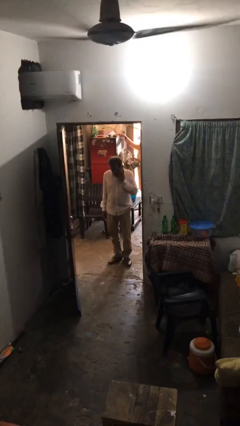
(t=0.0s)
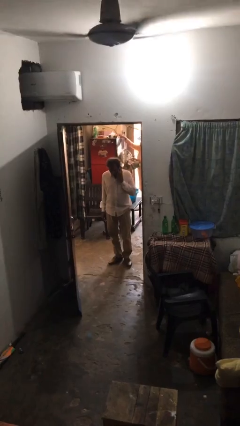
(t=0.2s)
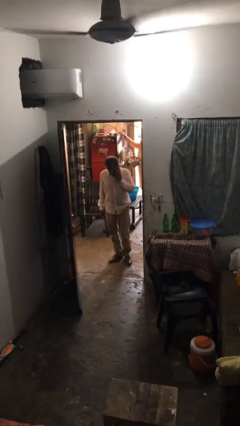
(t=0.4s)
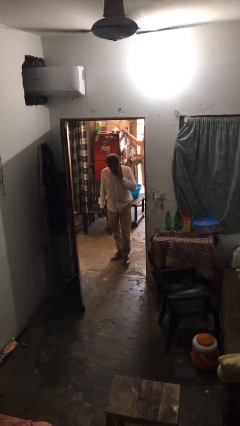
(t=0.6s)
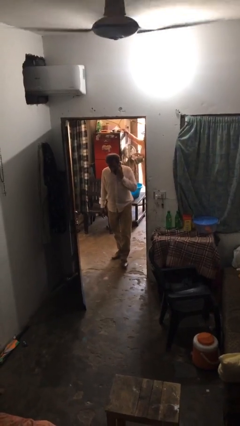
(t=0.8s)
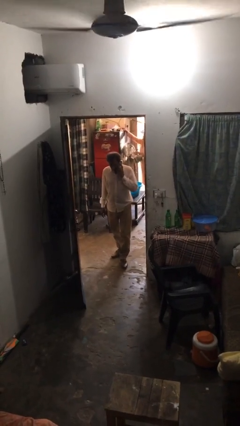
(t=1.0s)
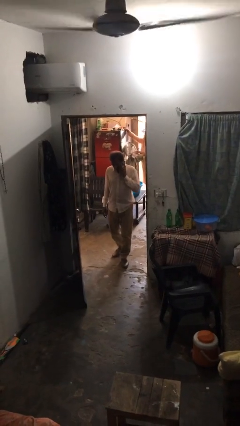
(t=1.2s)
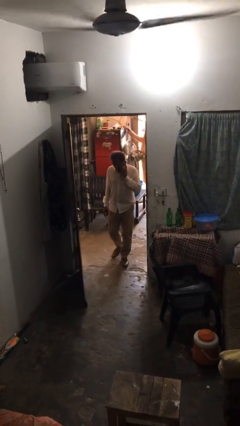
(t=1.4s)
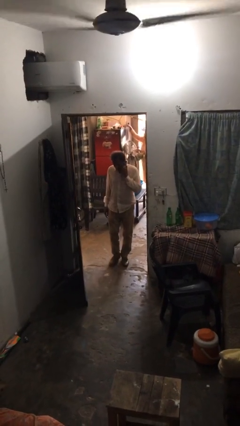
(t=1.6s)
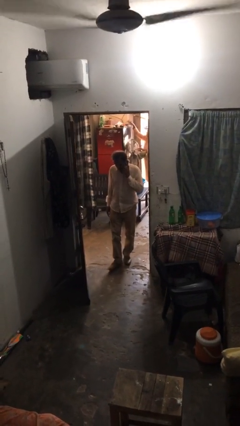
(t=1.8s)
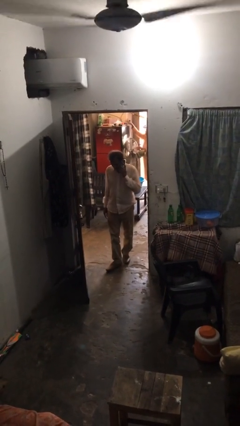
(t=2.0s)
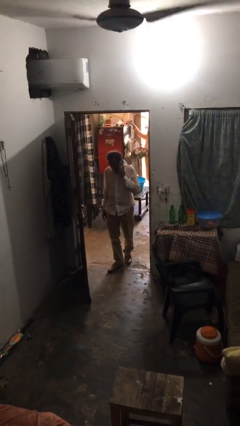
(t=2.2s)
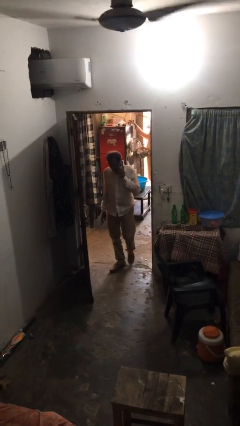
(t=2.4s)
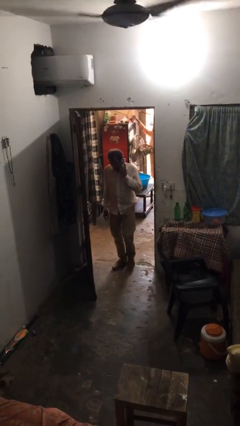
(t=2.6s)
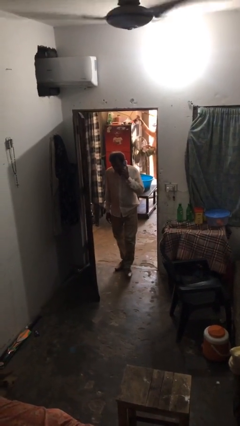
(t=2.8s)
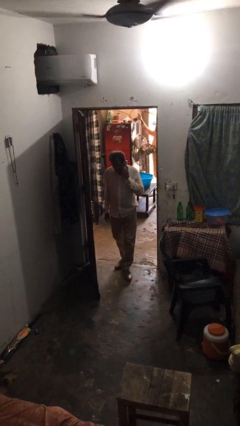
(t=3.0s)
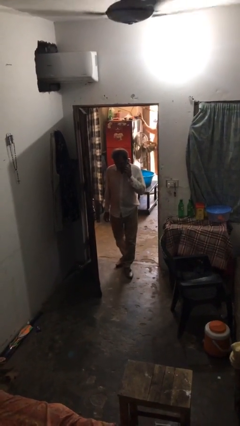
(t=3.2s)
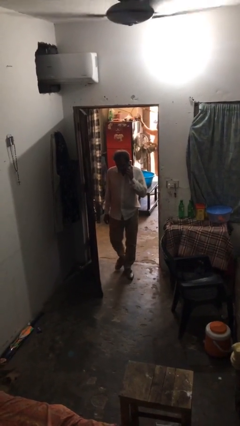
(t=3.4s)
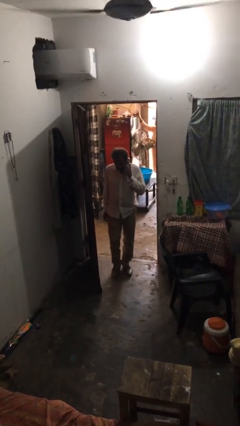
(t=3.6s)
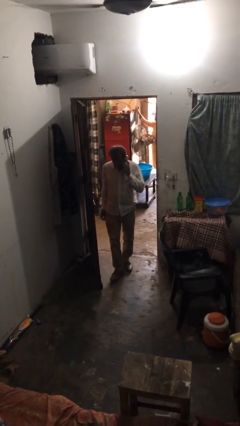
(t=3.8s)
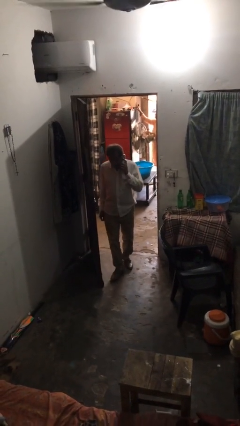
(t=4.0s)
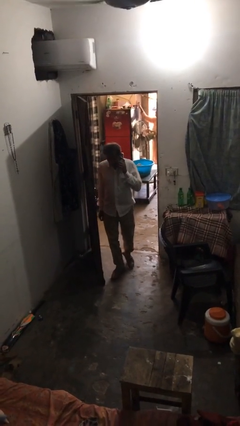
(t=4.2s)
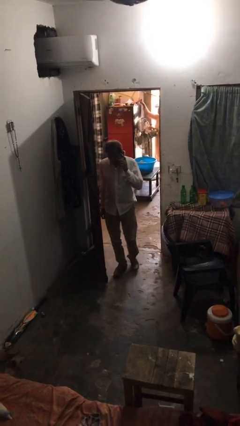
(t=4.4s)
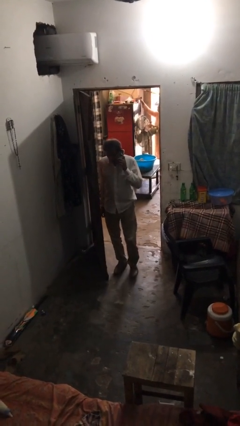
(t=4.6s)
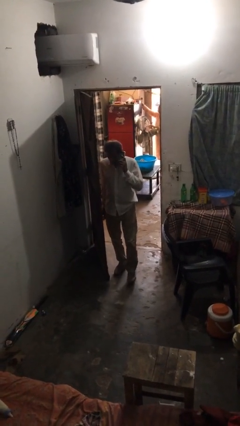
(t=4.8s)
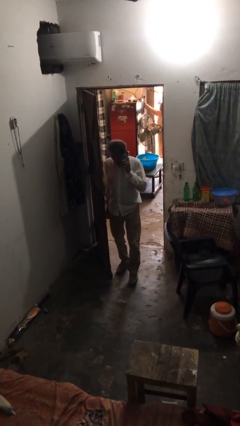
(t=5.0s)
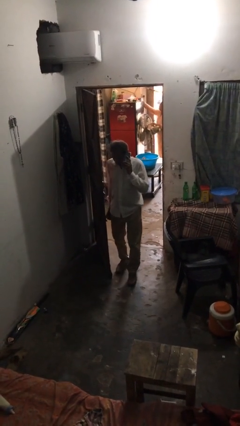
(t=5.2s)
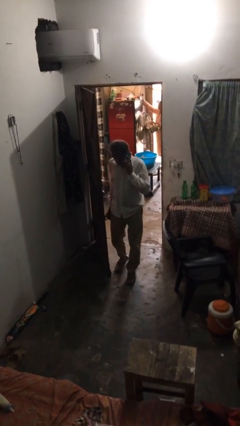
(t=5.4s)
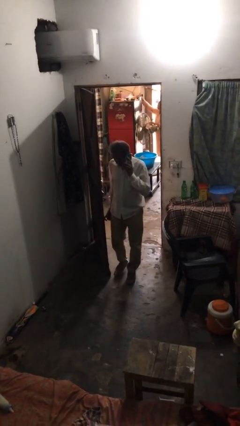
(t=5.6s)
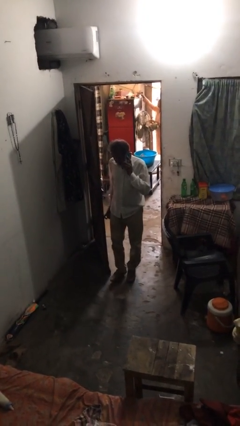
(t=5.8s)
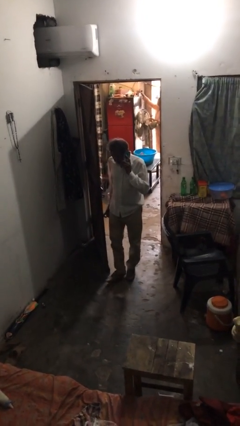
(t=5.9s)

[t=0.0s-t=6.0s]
person enters scene through structure

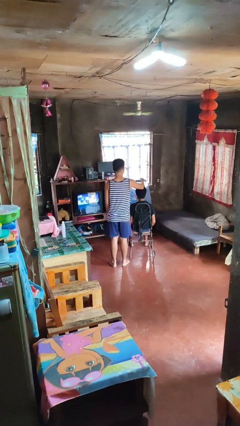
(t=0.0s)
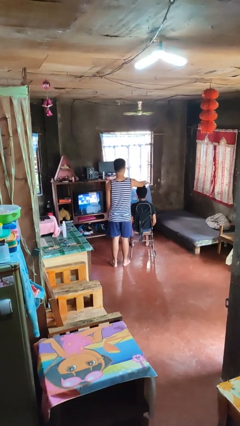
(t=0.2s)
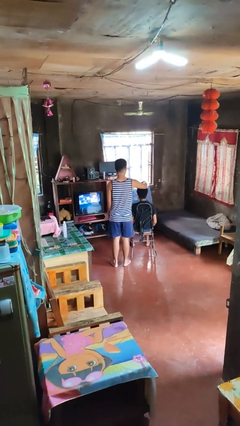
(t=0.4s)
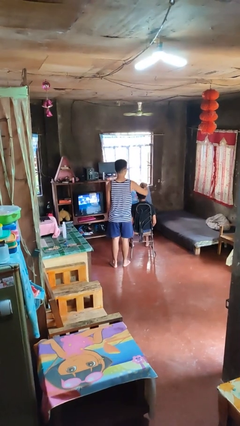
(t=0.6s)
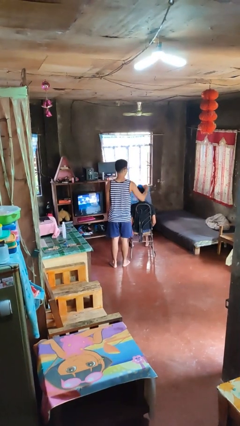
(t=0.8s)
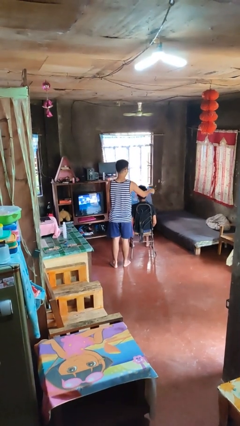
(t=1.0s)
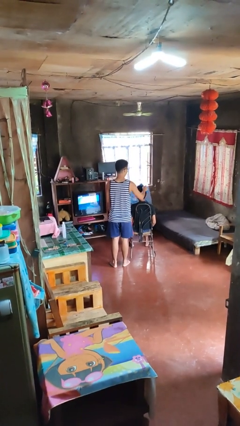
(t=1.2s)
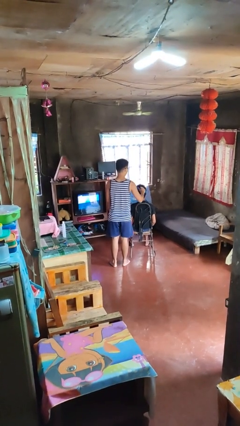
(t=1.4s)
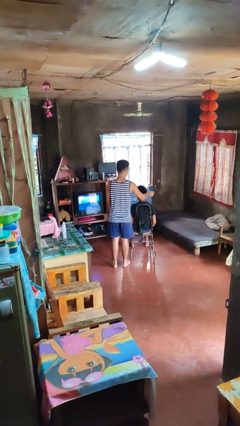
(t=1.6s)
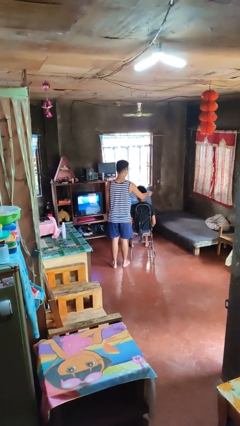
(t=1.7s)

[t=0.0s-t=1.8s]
person brushes hair of person

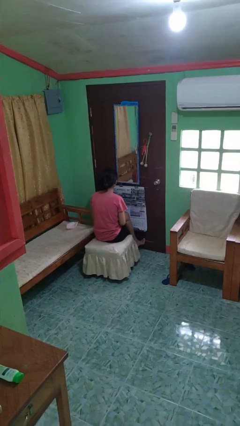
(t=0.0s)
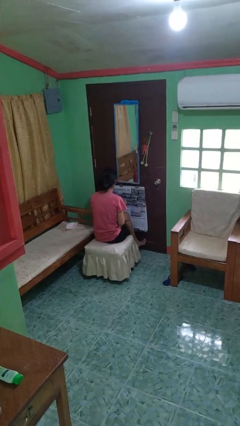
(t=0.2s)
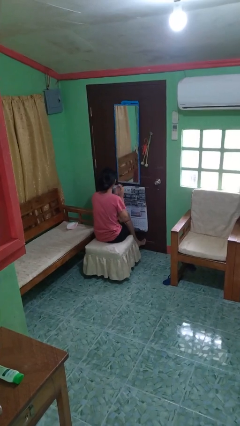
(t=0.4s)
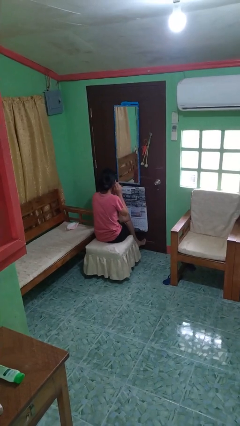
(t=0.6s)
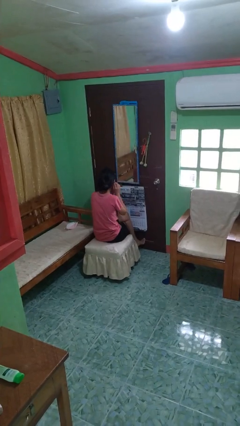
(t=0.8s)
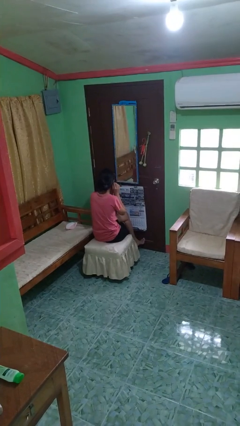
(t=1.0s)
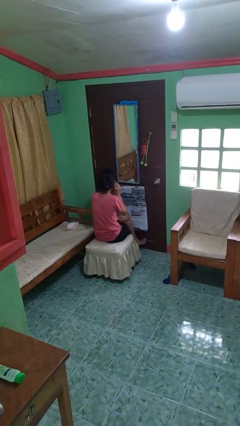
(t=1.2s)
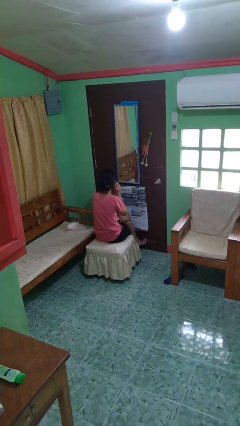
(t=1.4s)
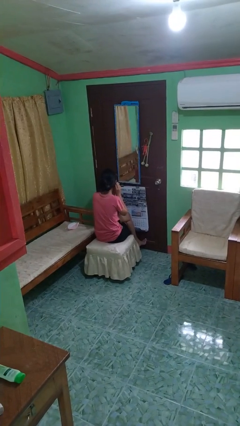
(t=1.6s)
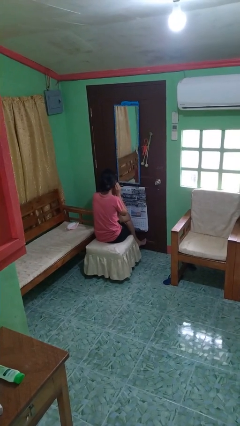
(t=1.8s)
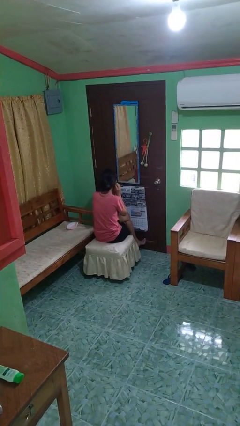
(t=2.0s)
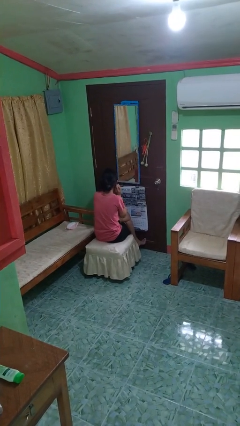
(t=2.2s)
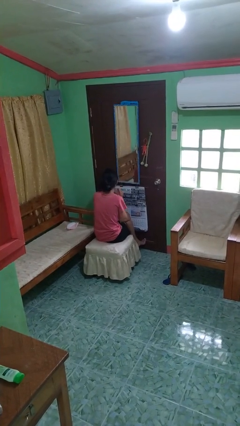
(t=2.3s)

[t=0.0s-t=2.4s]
person puts on earrings

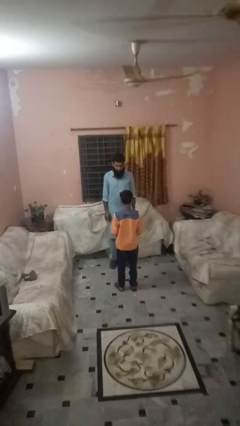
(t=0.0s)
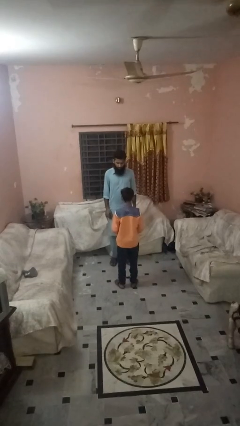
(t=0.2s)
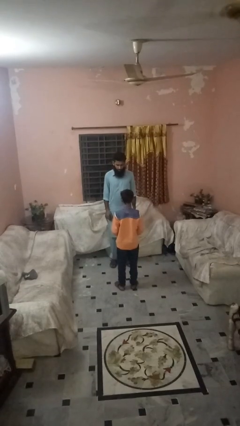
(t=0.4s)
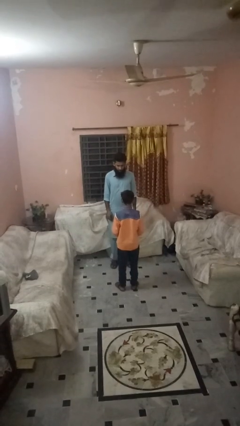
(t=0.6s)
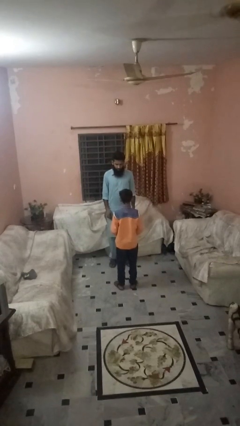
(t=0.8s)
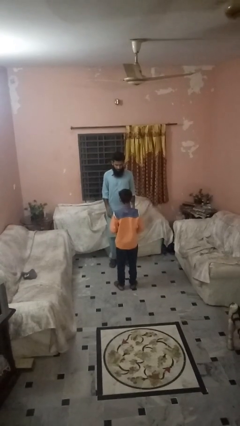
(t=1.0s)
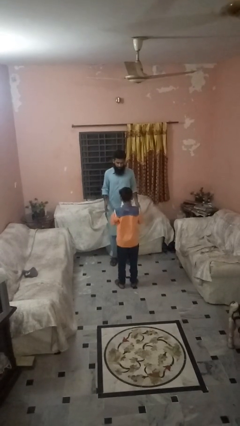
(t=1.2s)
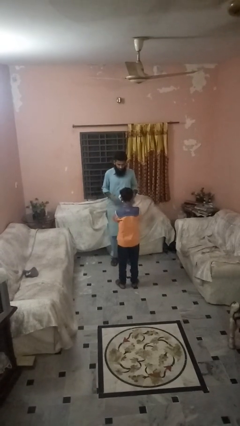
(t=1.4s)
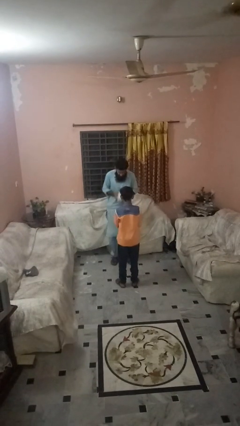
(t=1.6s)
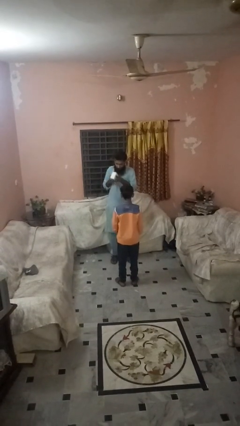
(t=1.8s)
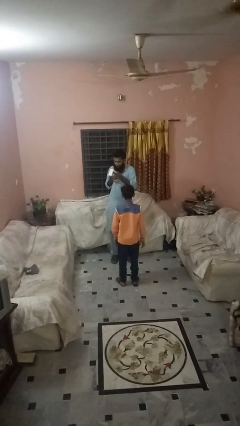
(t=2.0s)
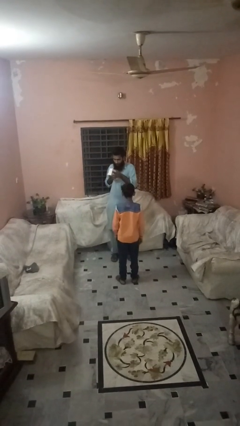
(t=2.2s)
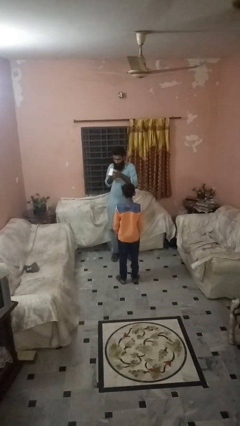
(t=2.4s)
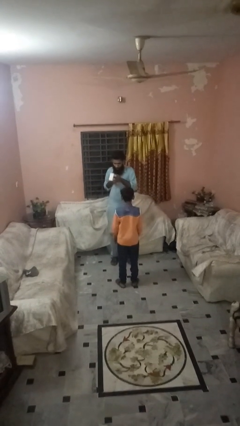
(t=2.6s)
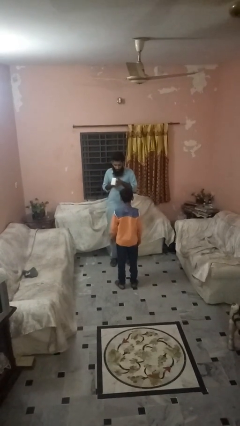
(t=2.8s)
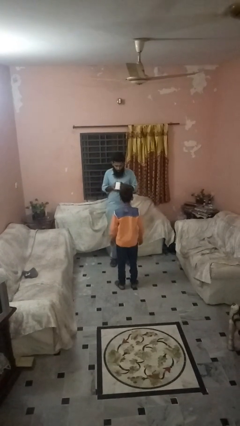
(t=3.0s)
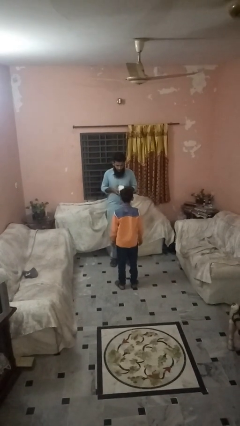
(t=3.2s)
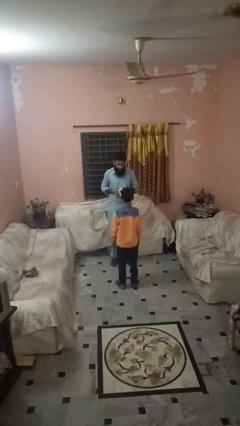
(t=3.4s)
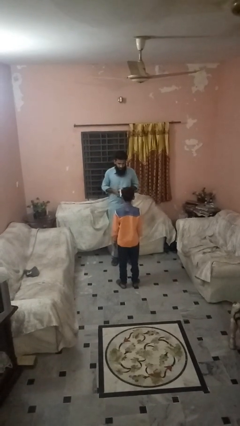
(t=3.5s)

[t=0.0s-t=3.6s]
person catches object from person

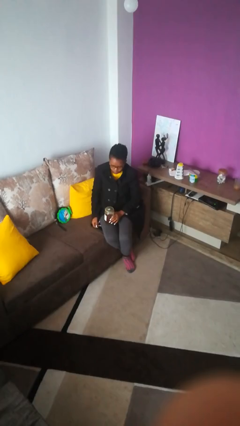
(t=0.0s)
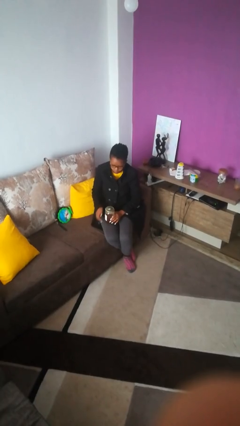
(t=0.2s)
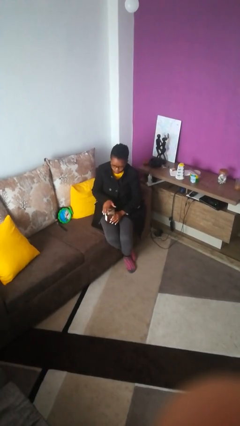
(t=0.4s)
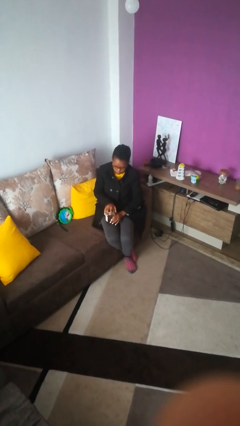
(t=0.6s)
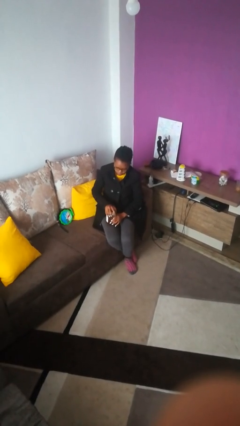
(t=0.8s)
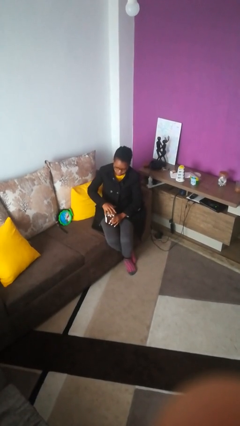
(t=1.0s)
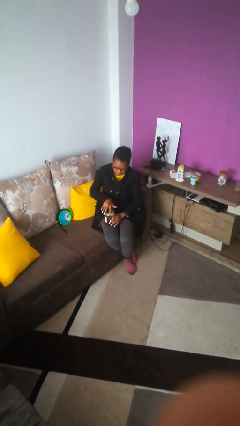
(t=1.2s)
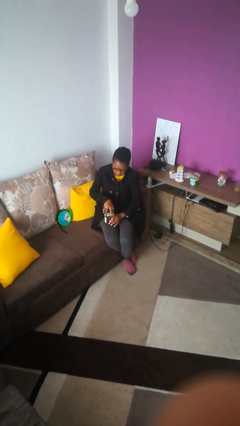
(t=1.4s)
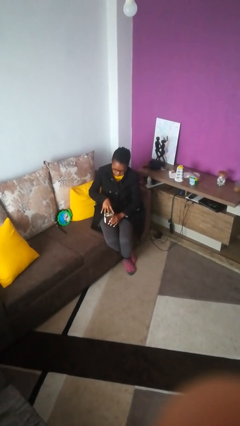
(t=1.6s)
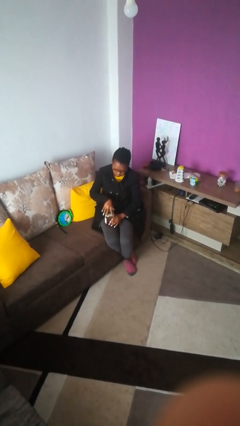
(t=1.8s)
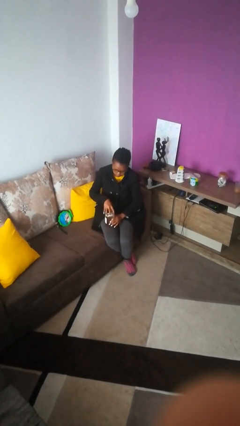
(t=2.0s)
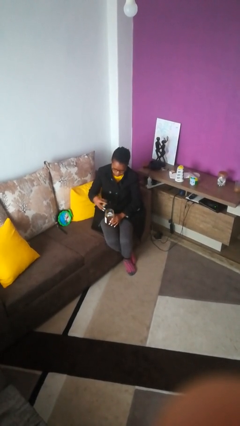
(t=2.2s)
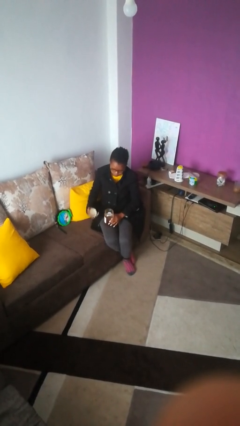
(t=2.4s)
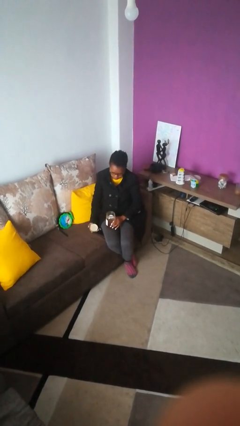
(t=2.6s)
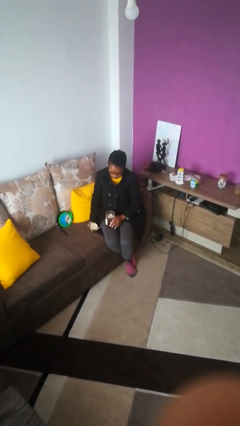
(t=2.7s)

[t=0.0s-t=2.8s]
person opens jar

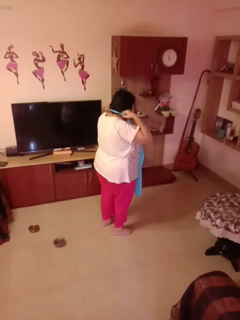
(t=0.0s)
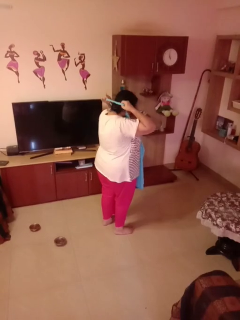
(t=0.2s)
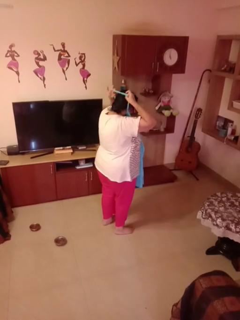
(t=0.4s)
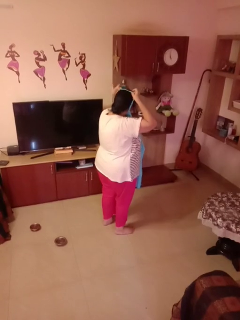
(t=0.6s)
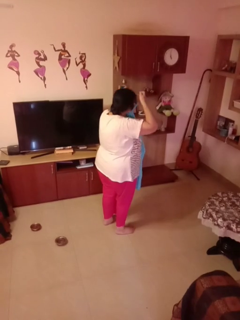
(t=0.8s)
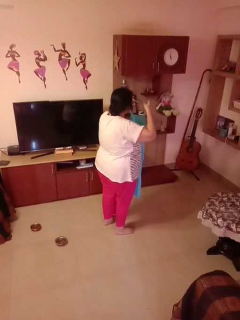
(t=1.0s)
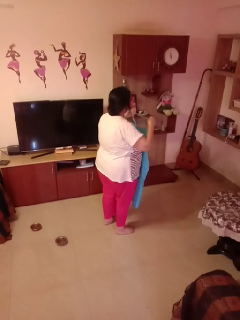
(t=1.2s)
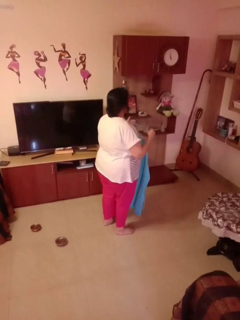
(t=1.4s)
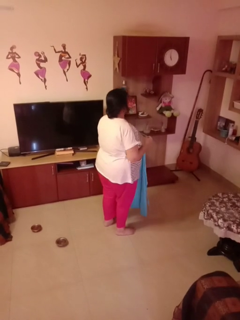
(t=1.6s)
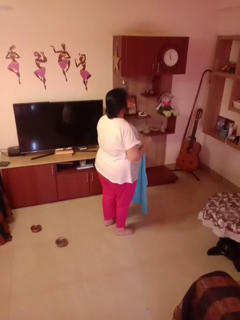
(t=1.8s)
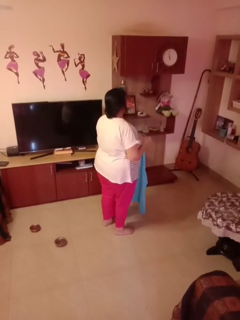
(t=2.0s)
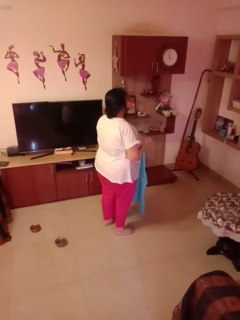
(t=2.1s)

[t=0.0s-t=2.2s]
person takes off apron
